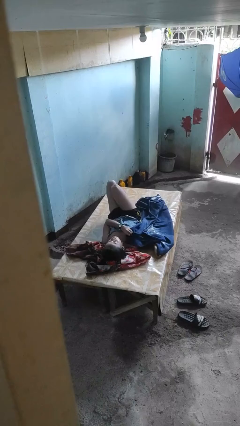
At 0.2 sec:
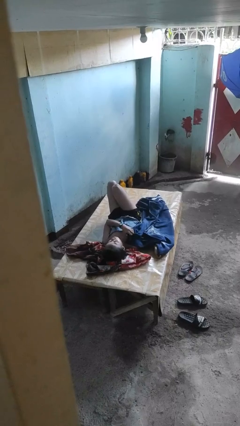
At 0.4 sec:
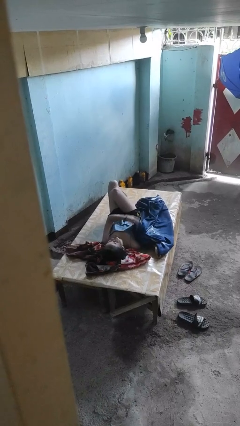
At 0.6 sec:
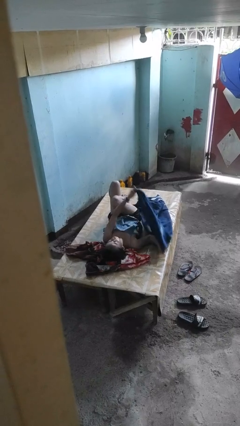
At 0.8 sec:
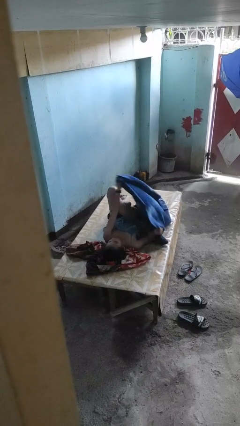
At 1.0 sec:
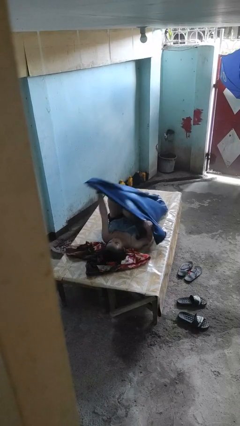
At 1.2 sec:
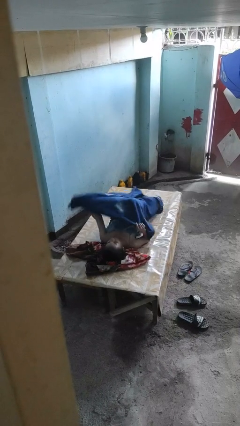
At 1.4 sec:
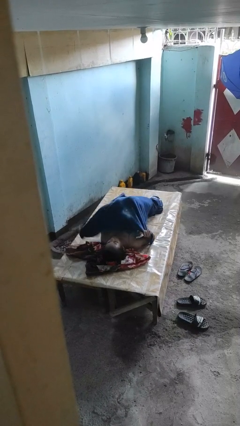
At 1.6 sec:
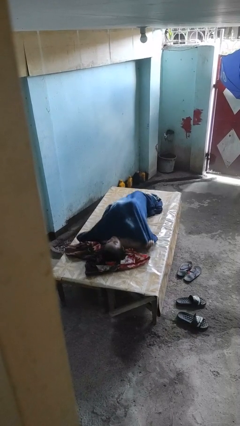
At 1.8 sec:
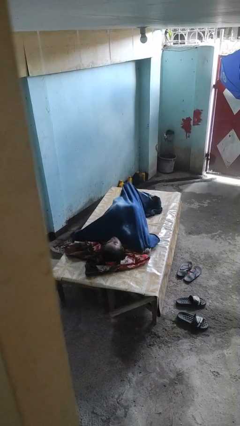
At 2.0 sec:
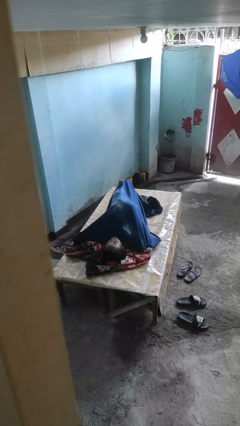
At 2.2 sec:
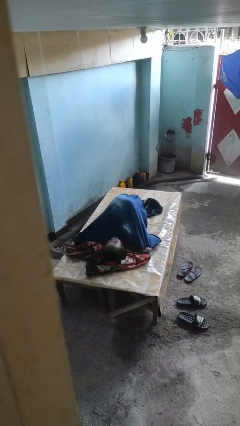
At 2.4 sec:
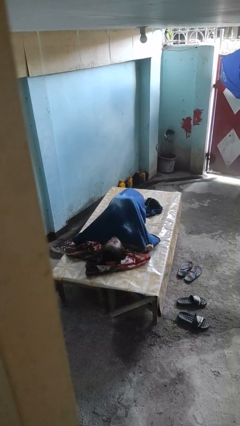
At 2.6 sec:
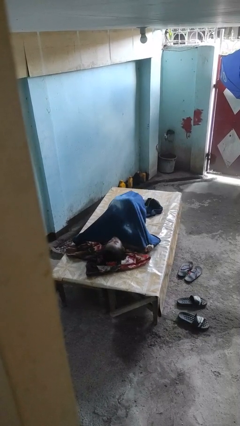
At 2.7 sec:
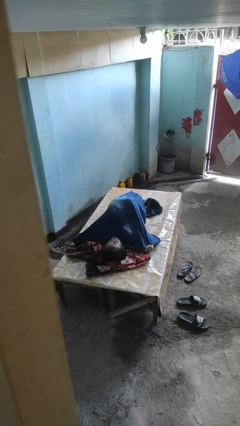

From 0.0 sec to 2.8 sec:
person covers with bedsheets

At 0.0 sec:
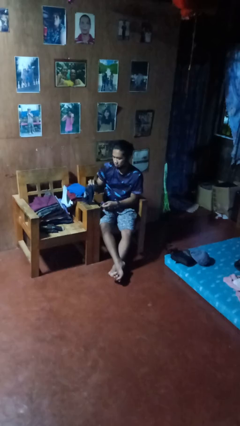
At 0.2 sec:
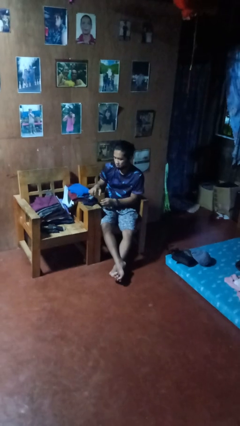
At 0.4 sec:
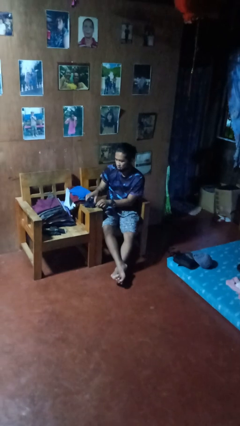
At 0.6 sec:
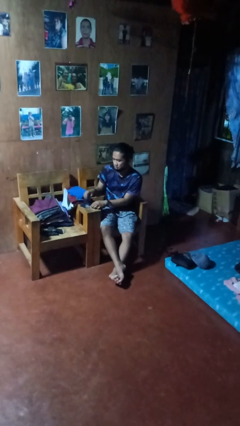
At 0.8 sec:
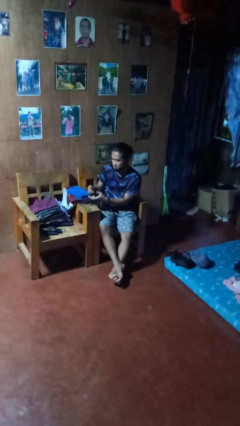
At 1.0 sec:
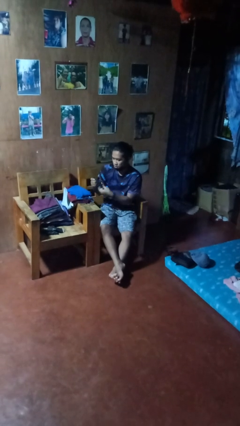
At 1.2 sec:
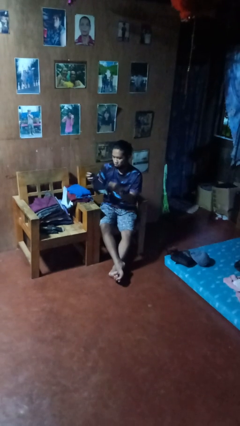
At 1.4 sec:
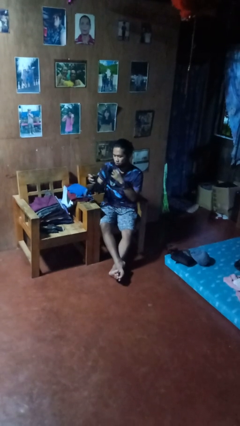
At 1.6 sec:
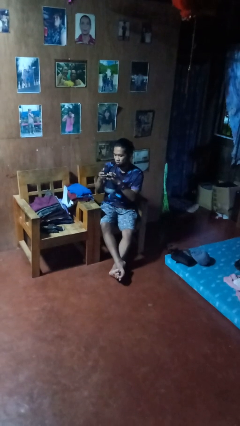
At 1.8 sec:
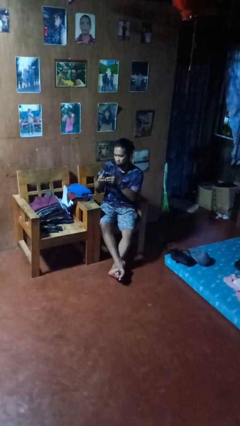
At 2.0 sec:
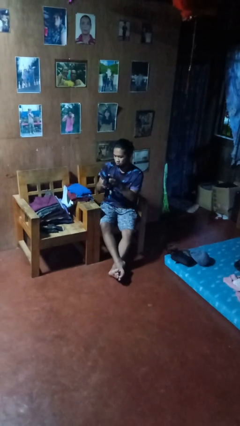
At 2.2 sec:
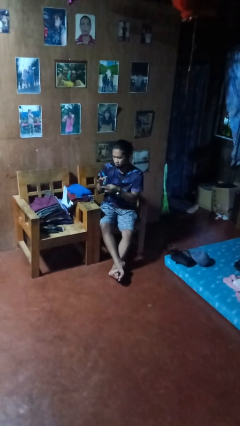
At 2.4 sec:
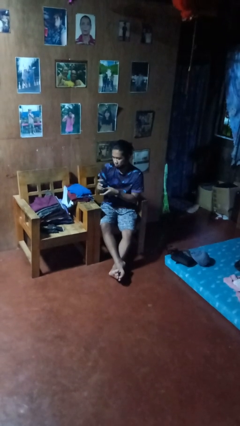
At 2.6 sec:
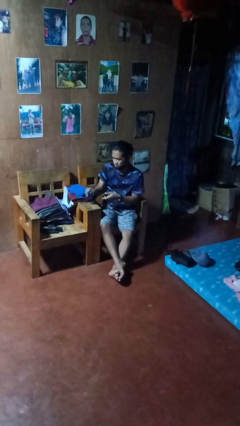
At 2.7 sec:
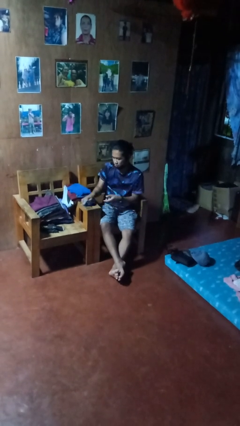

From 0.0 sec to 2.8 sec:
person folds socks

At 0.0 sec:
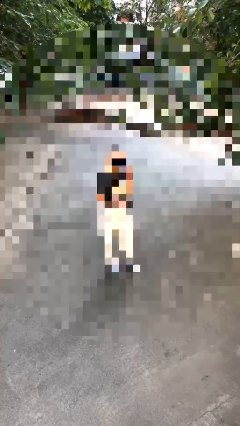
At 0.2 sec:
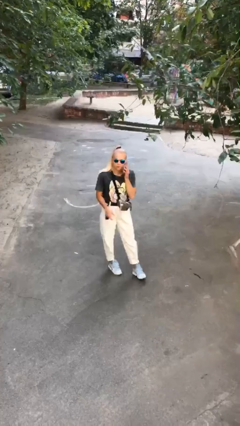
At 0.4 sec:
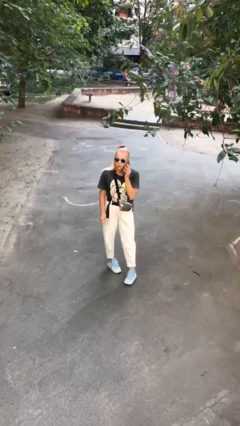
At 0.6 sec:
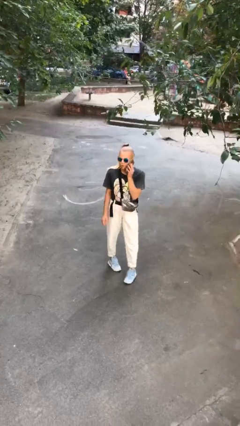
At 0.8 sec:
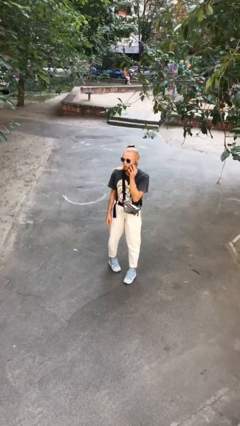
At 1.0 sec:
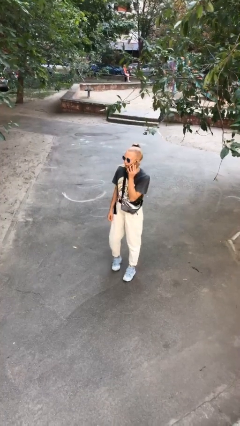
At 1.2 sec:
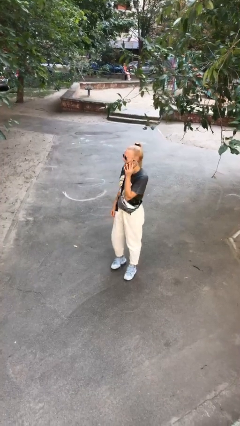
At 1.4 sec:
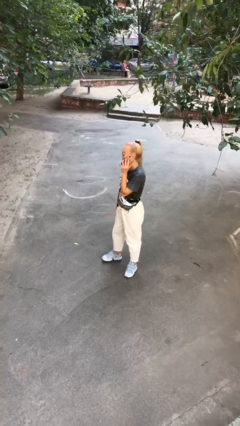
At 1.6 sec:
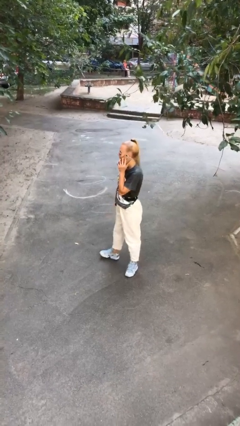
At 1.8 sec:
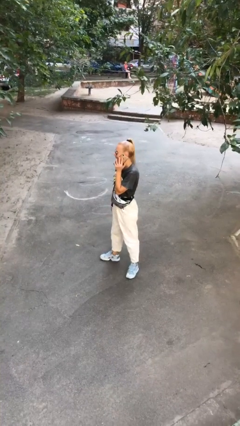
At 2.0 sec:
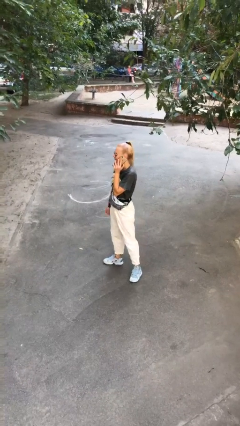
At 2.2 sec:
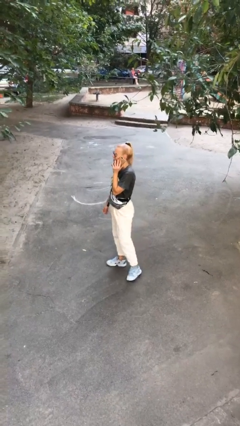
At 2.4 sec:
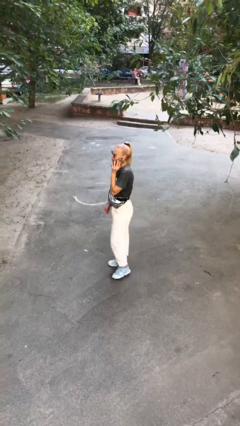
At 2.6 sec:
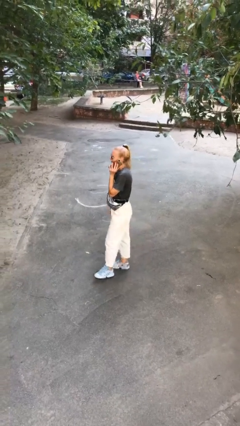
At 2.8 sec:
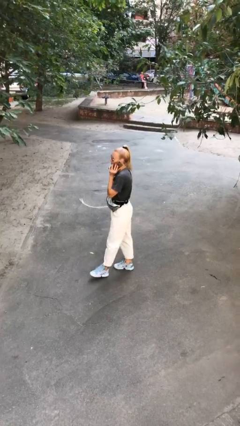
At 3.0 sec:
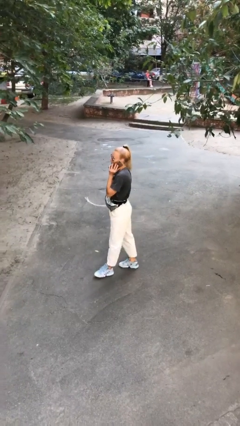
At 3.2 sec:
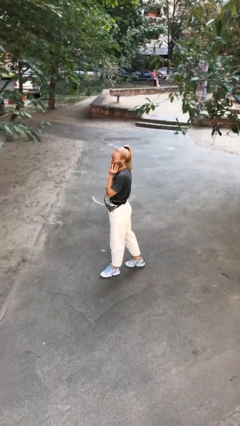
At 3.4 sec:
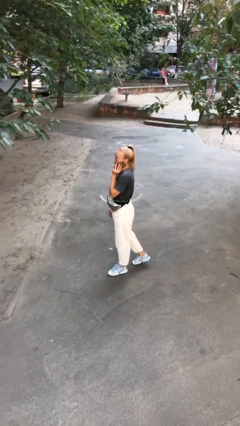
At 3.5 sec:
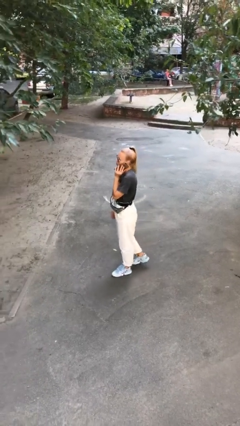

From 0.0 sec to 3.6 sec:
person talks on phone

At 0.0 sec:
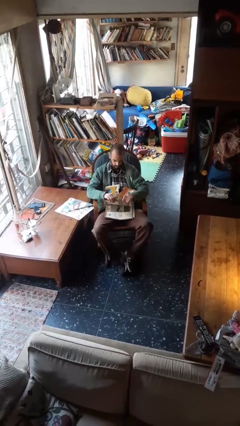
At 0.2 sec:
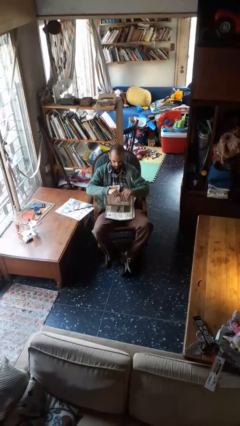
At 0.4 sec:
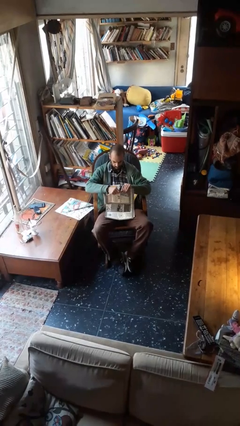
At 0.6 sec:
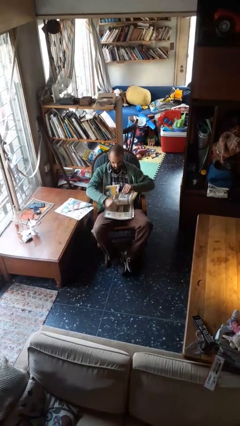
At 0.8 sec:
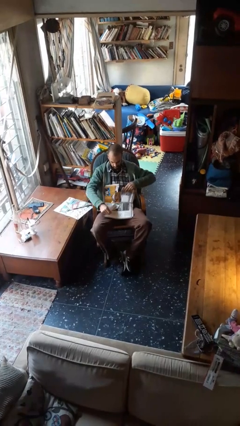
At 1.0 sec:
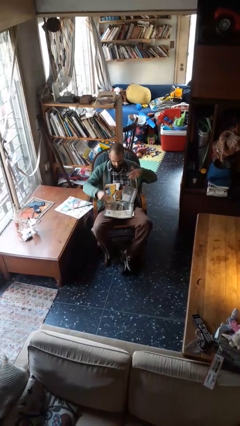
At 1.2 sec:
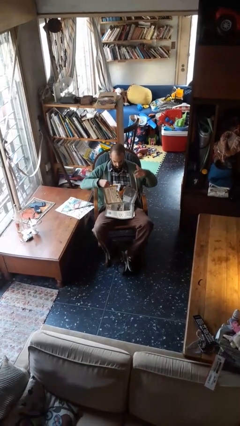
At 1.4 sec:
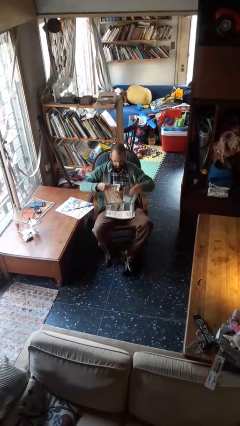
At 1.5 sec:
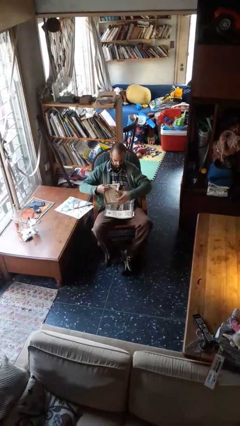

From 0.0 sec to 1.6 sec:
person tears paper

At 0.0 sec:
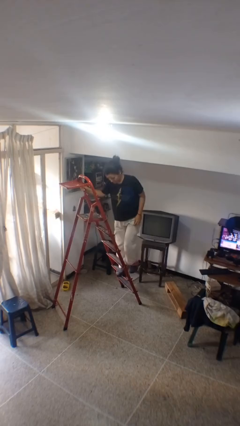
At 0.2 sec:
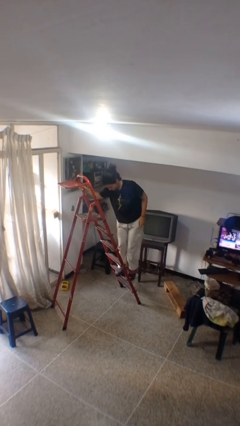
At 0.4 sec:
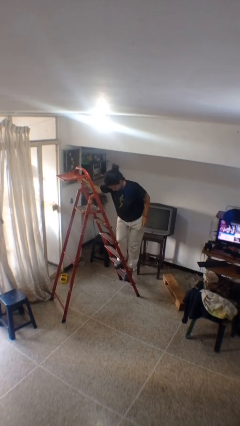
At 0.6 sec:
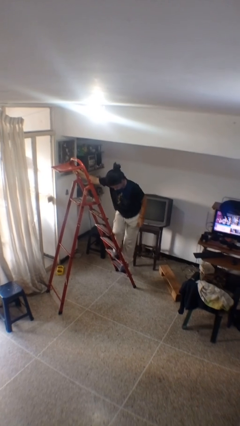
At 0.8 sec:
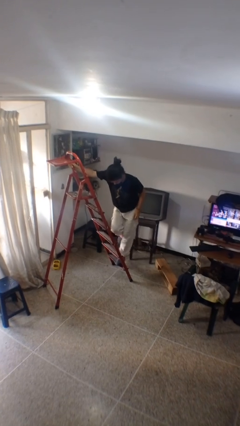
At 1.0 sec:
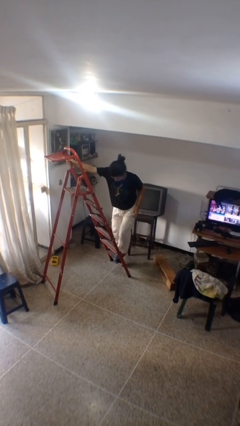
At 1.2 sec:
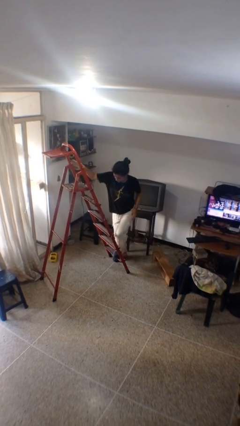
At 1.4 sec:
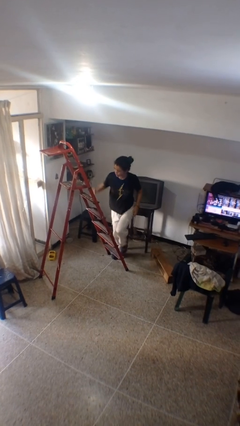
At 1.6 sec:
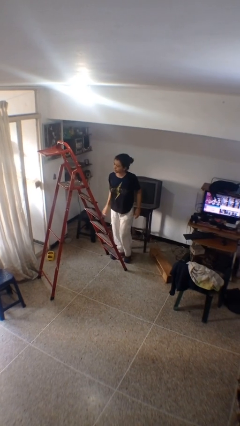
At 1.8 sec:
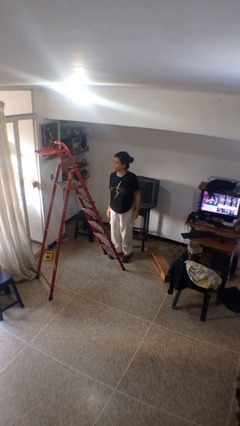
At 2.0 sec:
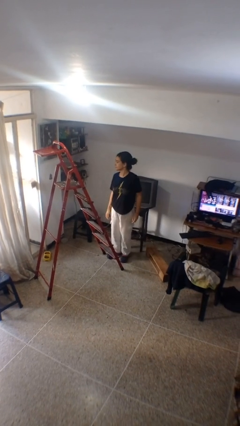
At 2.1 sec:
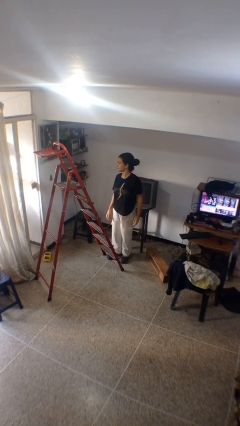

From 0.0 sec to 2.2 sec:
person climbs down ladder

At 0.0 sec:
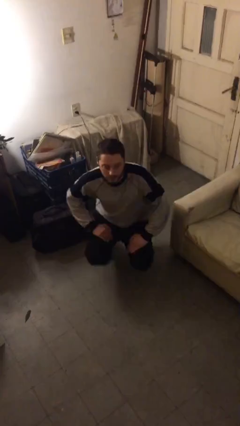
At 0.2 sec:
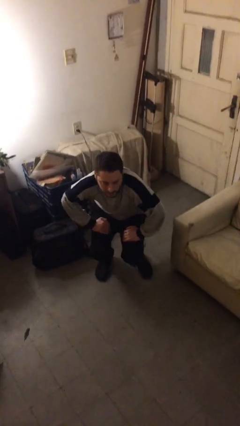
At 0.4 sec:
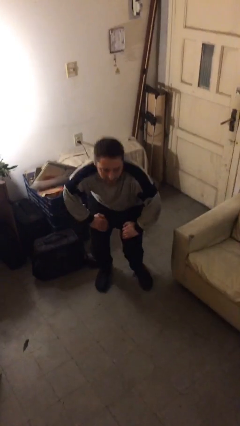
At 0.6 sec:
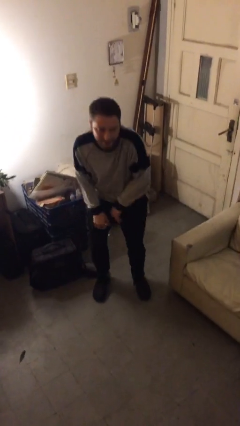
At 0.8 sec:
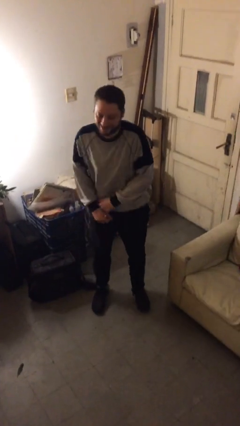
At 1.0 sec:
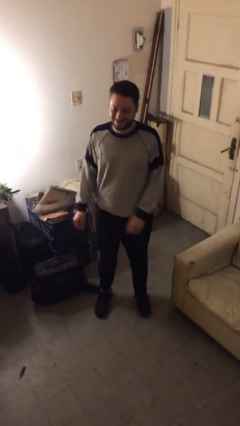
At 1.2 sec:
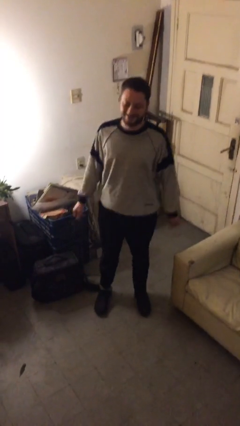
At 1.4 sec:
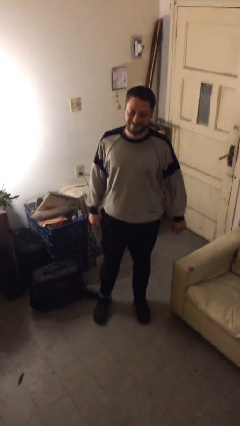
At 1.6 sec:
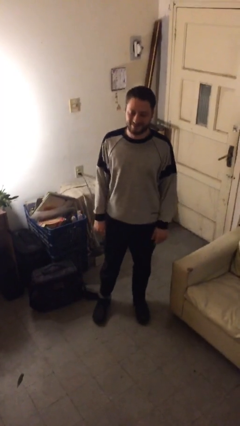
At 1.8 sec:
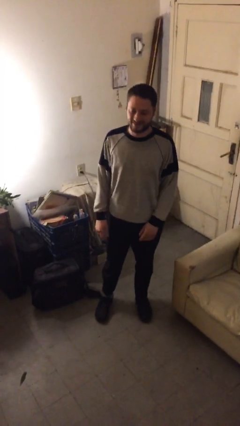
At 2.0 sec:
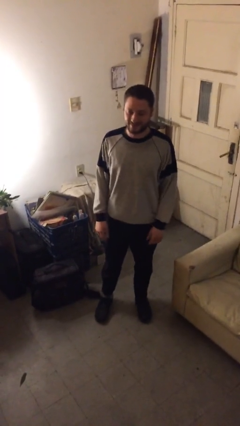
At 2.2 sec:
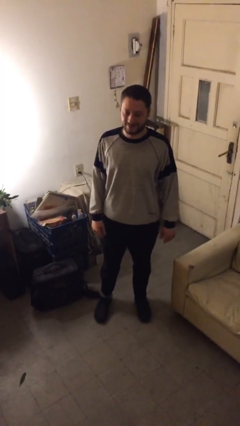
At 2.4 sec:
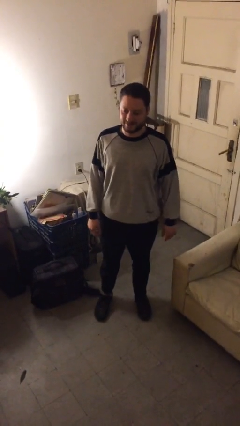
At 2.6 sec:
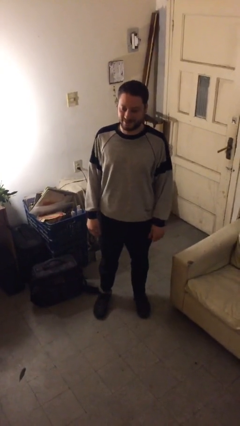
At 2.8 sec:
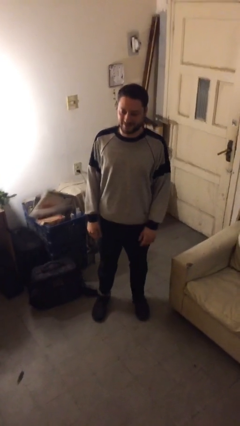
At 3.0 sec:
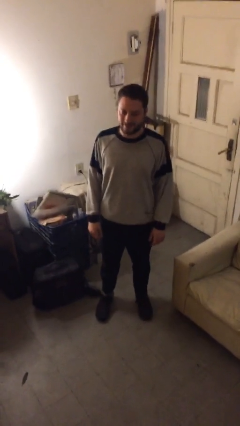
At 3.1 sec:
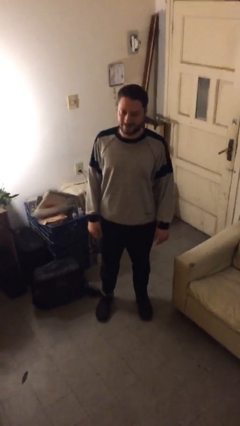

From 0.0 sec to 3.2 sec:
person stands up from floor

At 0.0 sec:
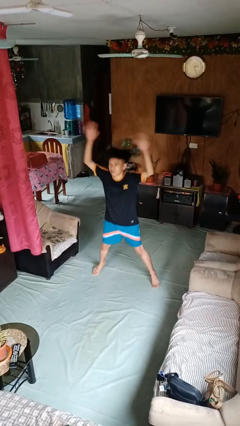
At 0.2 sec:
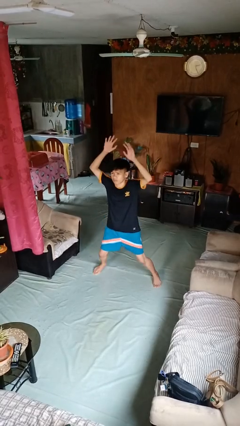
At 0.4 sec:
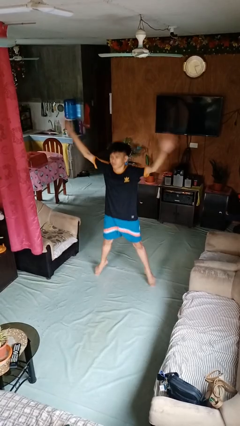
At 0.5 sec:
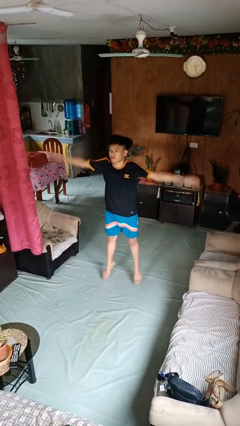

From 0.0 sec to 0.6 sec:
person exercises with jumping jacks
